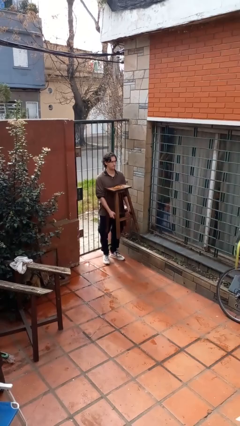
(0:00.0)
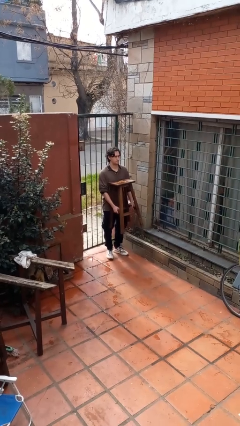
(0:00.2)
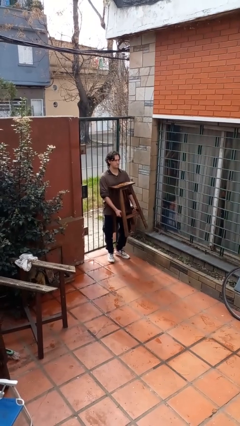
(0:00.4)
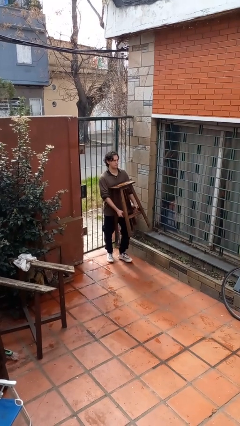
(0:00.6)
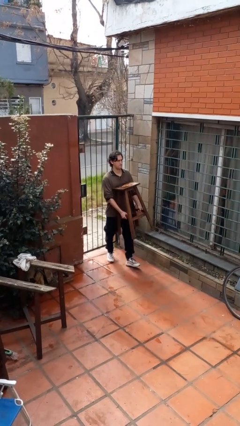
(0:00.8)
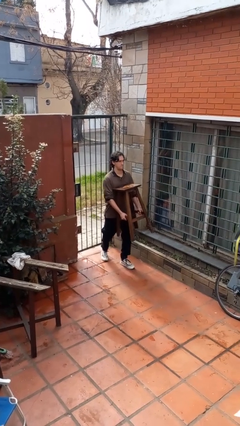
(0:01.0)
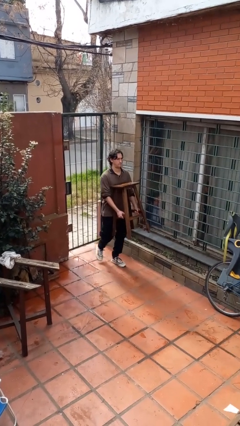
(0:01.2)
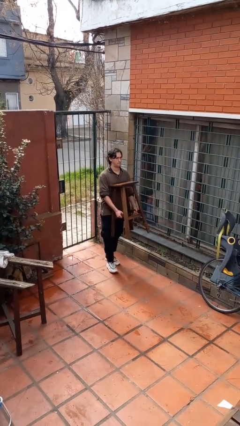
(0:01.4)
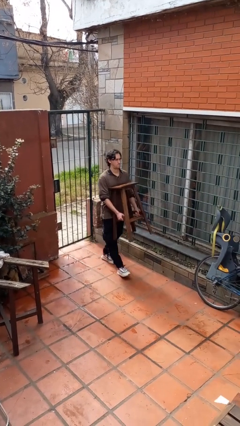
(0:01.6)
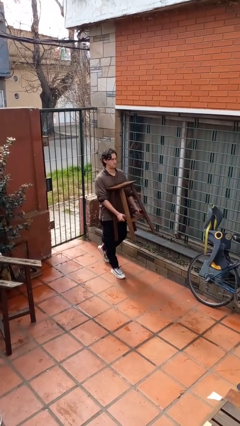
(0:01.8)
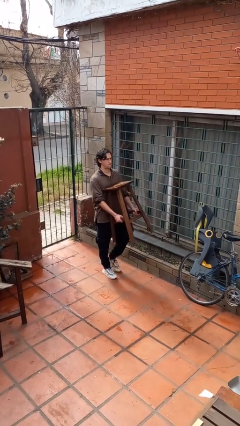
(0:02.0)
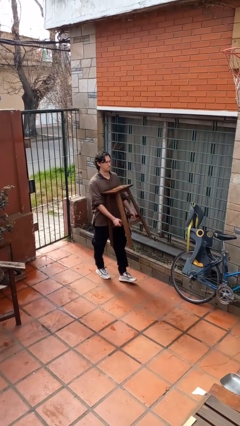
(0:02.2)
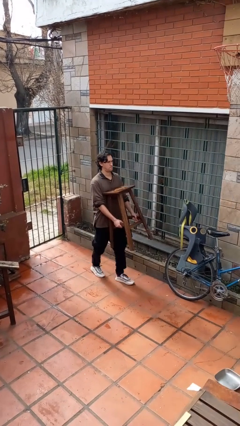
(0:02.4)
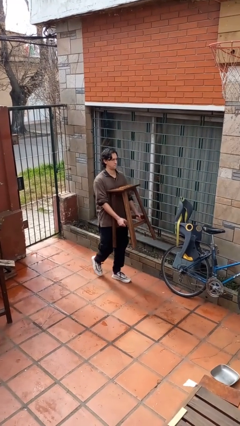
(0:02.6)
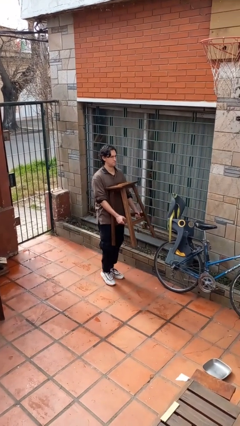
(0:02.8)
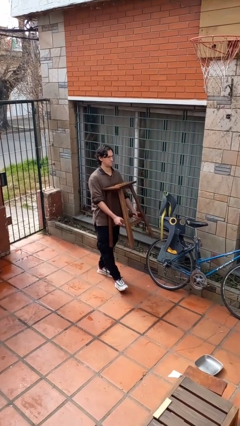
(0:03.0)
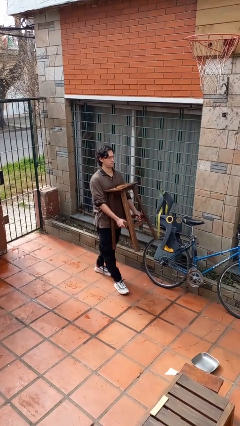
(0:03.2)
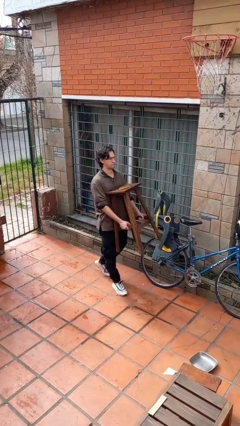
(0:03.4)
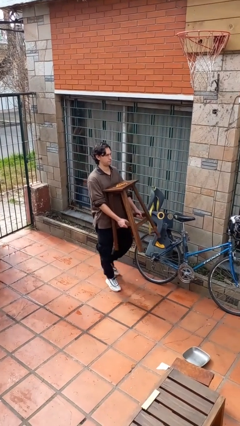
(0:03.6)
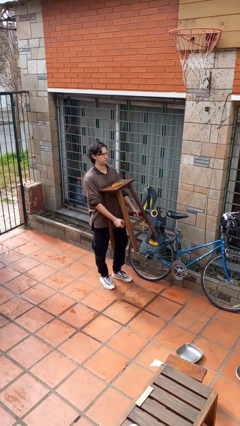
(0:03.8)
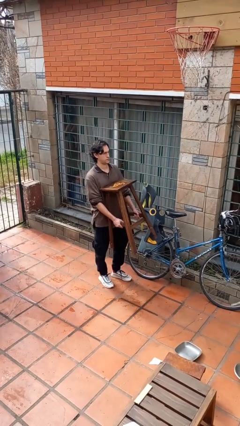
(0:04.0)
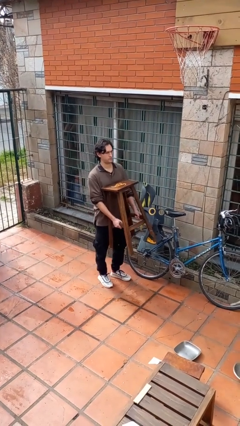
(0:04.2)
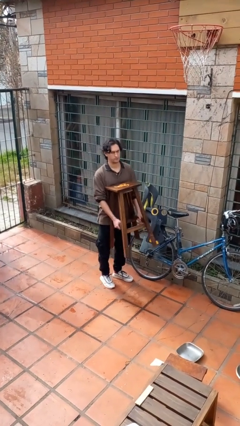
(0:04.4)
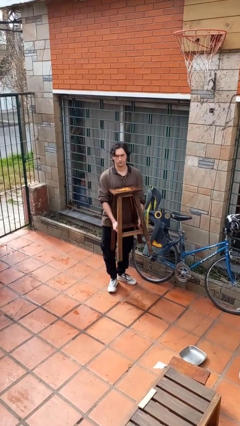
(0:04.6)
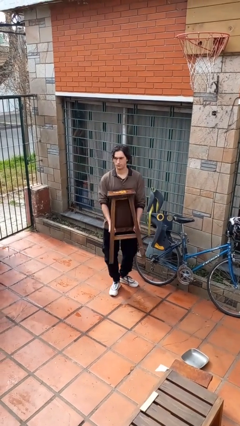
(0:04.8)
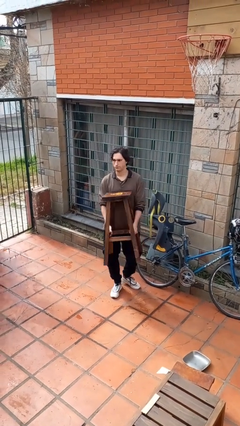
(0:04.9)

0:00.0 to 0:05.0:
person carries furniture

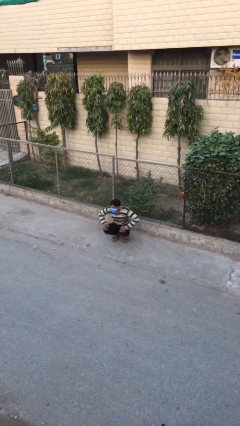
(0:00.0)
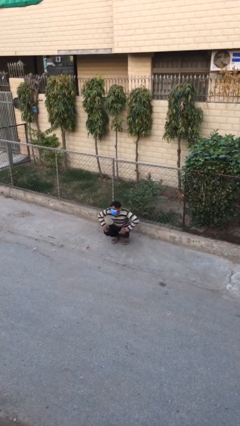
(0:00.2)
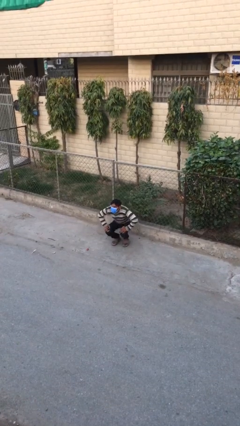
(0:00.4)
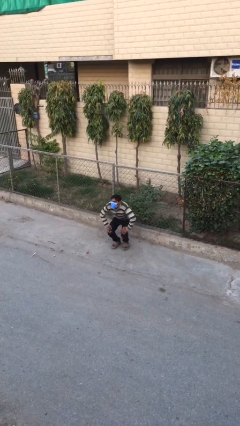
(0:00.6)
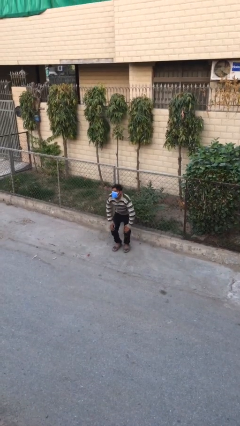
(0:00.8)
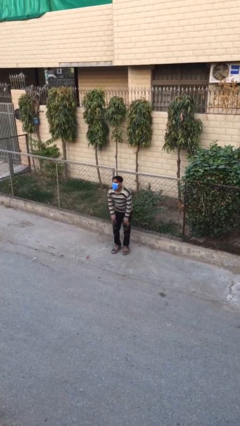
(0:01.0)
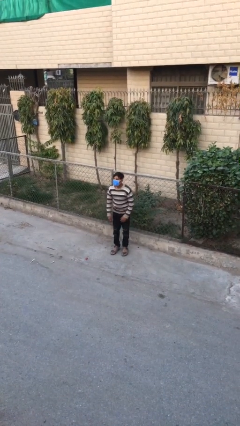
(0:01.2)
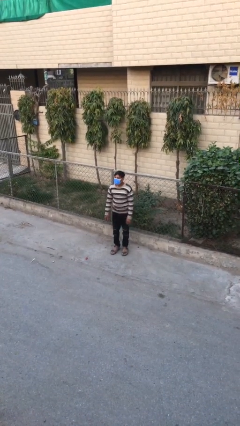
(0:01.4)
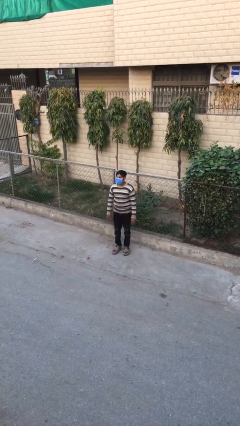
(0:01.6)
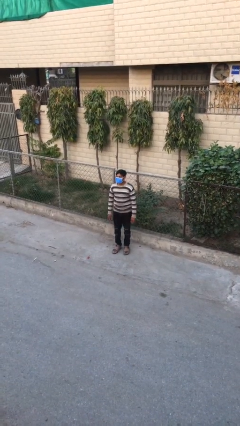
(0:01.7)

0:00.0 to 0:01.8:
person stands up

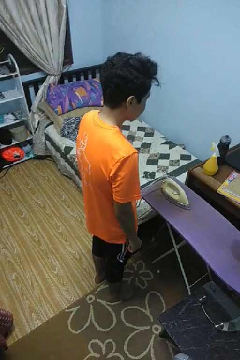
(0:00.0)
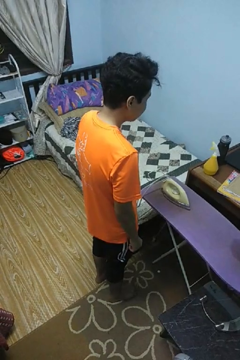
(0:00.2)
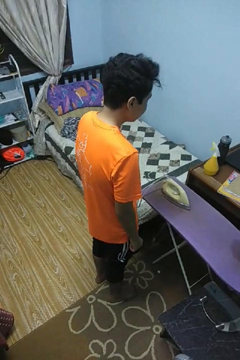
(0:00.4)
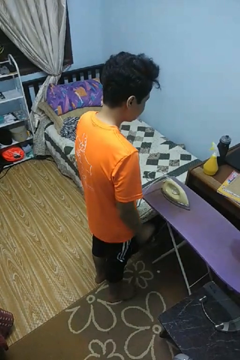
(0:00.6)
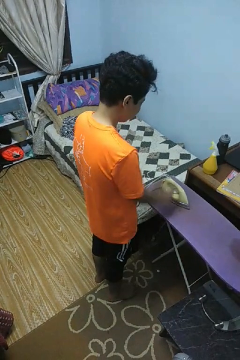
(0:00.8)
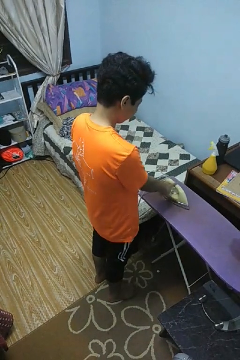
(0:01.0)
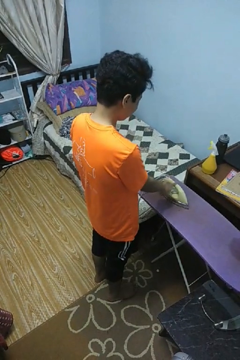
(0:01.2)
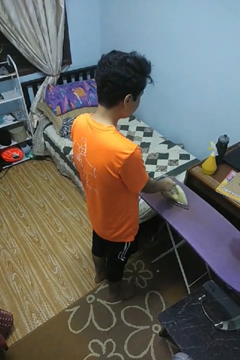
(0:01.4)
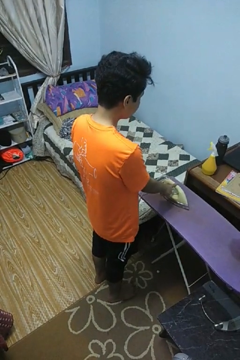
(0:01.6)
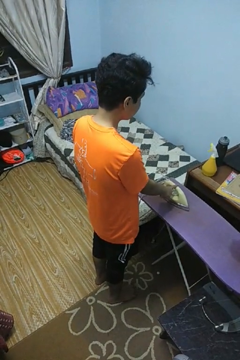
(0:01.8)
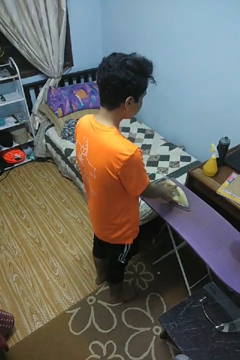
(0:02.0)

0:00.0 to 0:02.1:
person taps object with finger

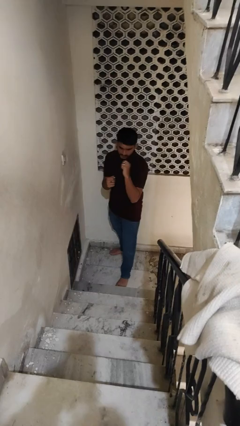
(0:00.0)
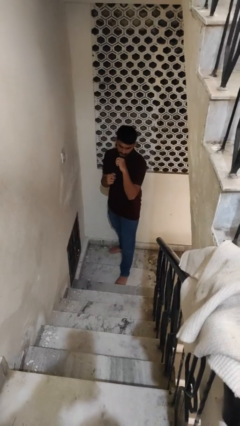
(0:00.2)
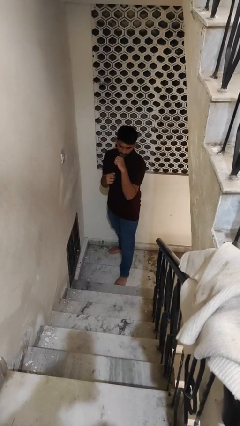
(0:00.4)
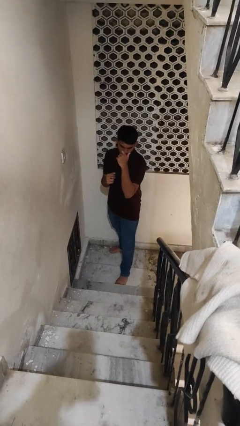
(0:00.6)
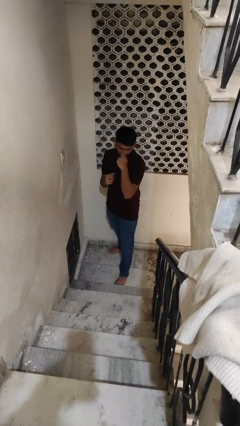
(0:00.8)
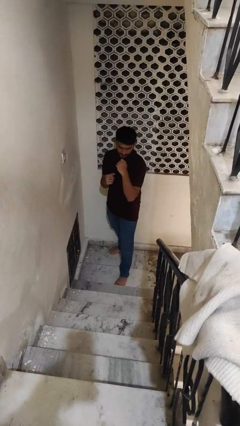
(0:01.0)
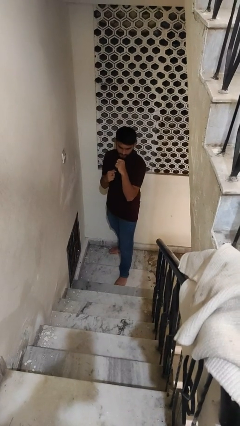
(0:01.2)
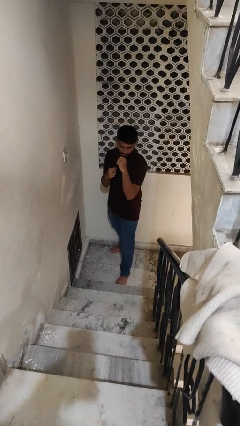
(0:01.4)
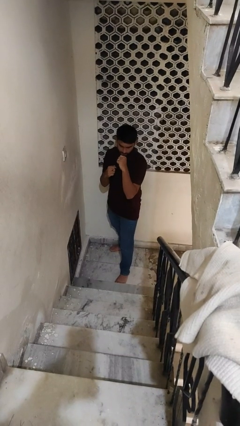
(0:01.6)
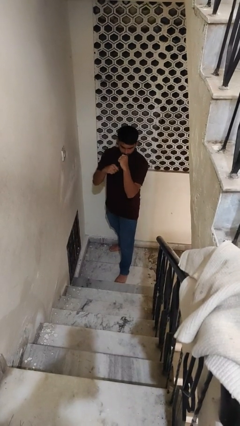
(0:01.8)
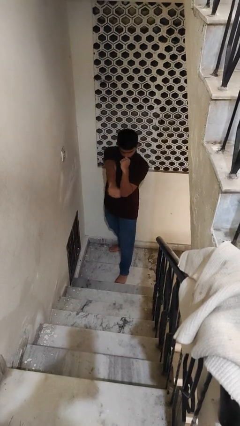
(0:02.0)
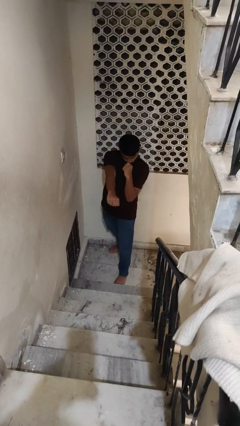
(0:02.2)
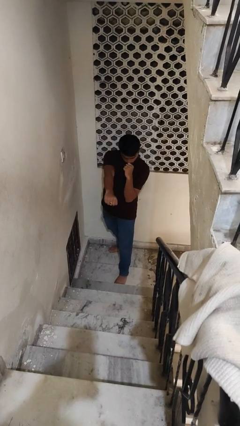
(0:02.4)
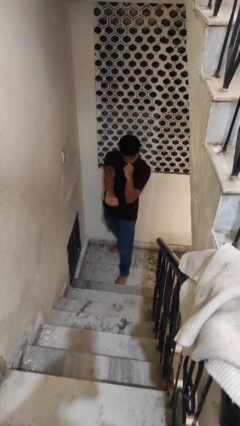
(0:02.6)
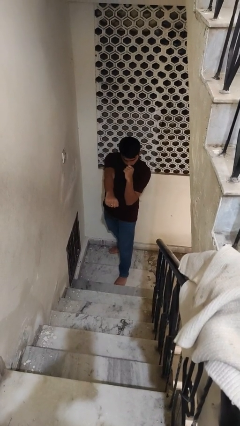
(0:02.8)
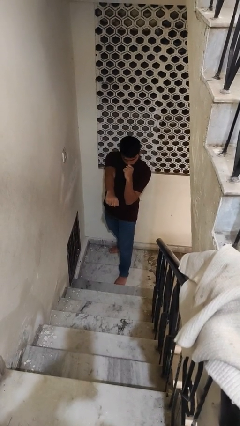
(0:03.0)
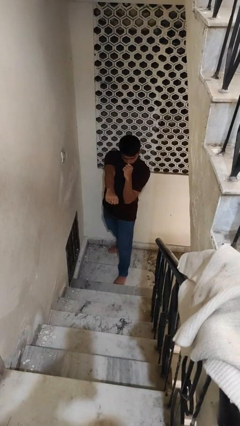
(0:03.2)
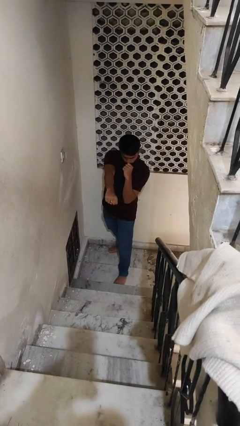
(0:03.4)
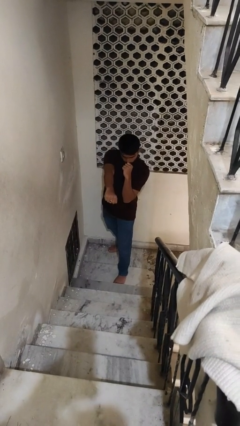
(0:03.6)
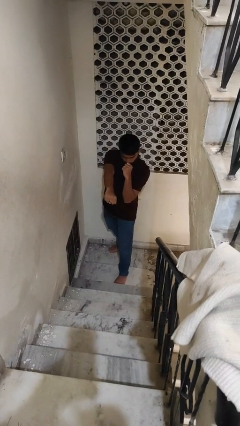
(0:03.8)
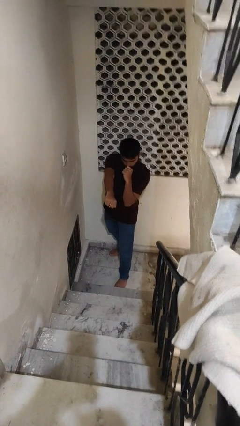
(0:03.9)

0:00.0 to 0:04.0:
person punches

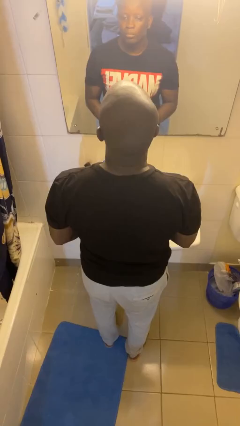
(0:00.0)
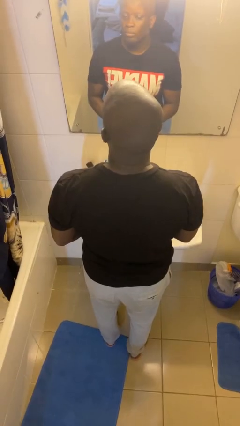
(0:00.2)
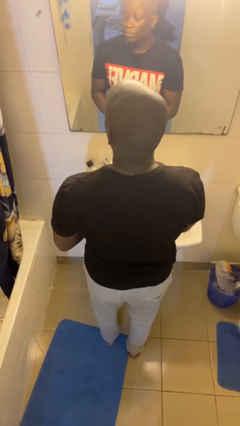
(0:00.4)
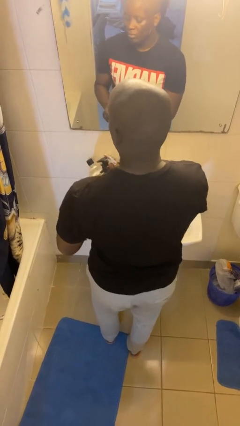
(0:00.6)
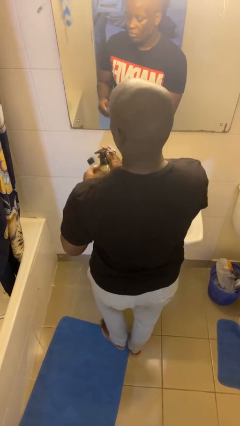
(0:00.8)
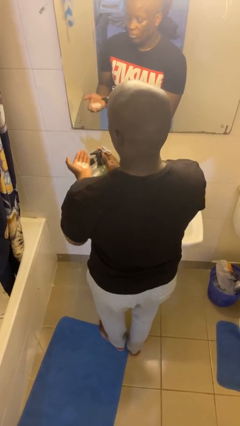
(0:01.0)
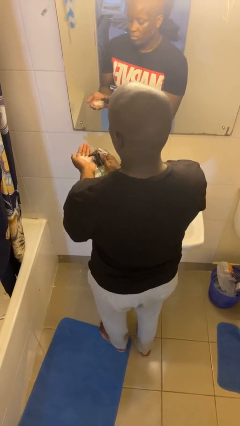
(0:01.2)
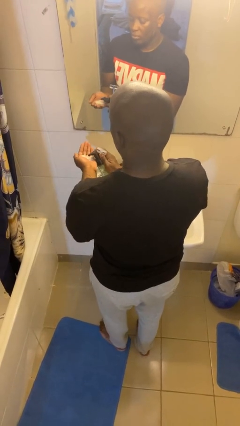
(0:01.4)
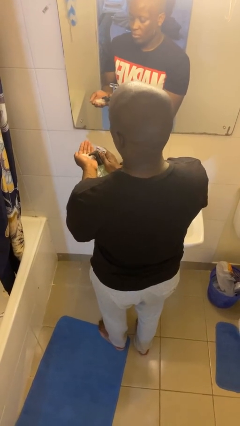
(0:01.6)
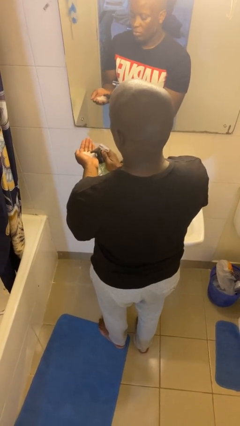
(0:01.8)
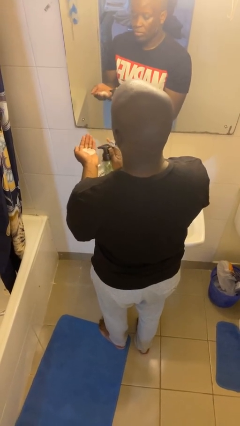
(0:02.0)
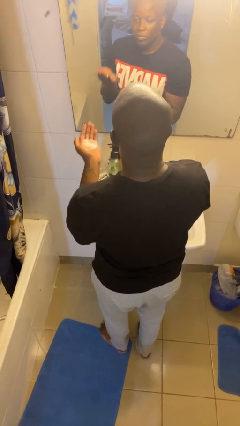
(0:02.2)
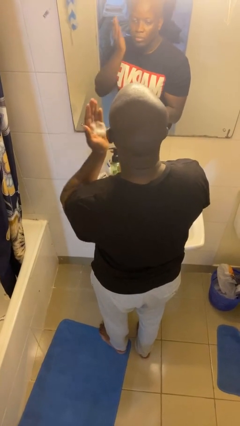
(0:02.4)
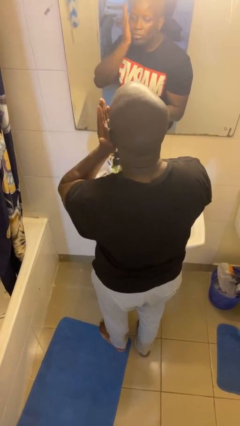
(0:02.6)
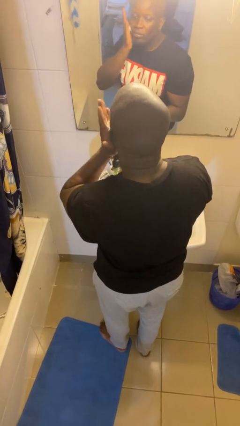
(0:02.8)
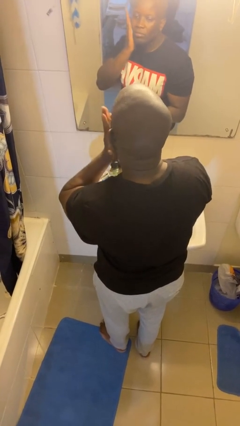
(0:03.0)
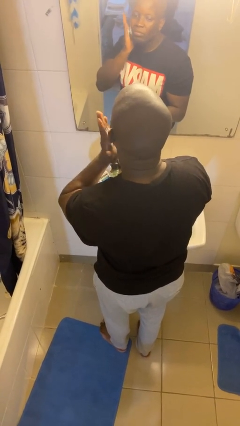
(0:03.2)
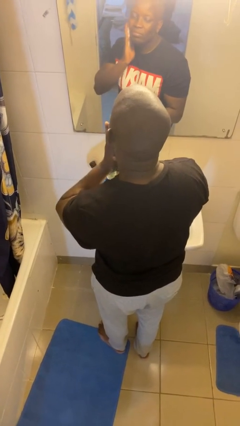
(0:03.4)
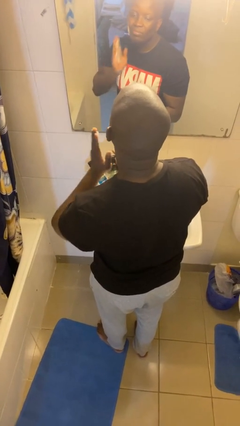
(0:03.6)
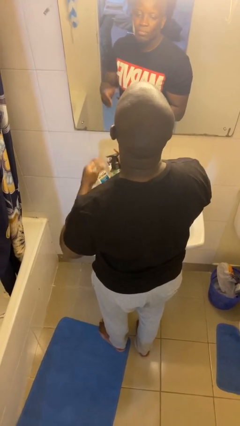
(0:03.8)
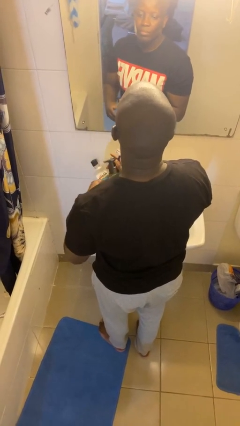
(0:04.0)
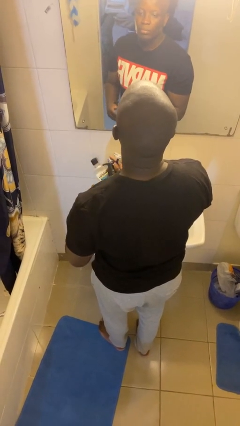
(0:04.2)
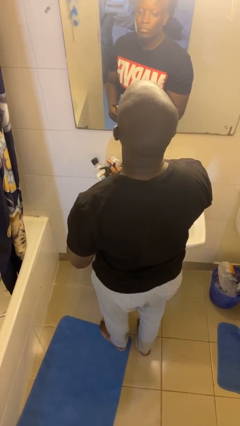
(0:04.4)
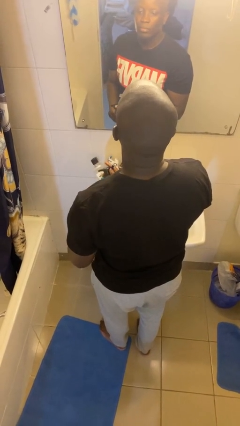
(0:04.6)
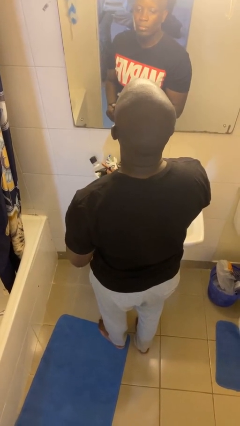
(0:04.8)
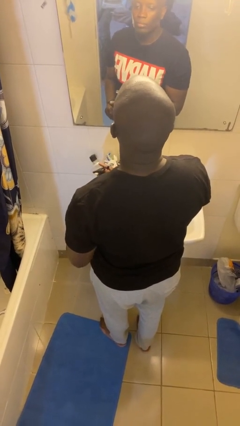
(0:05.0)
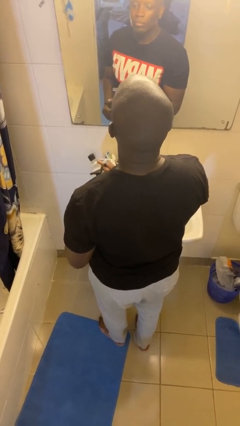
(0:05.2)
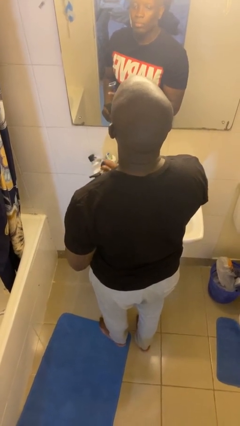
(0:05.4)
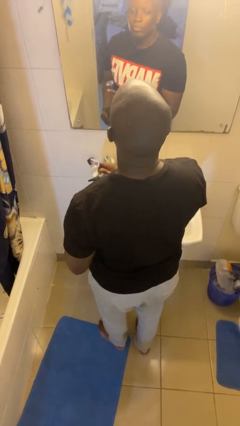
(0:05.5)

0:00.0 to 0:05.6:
person applies shaving cream

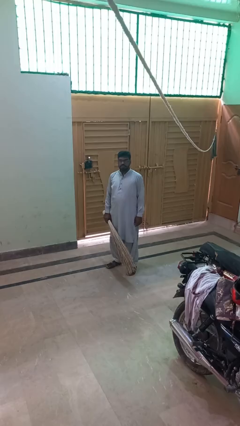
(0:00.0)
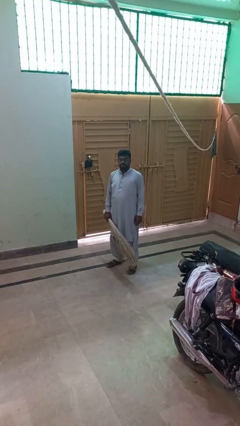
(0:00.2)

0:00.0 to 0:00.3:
person sweeps floor
